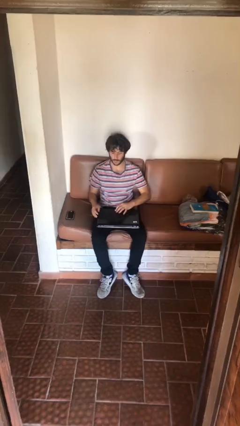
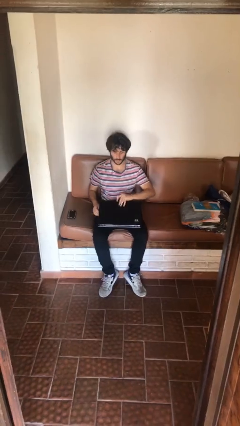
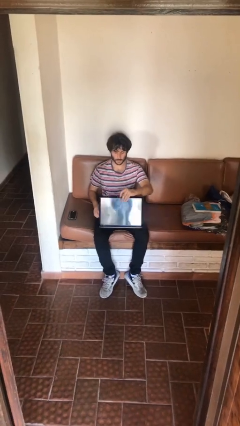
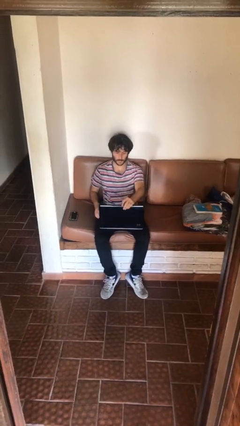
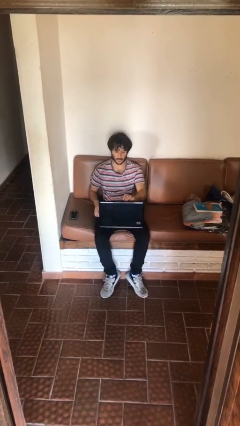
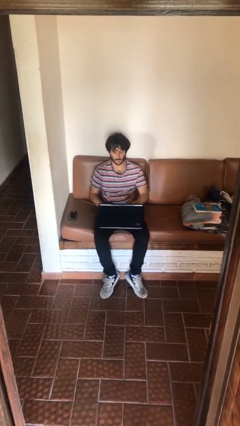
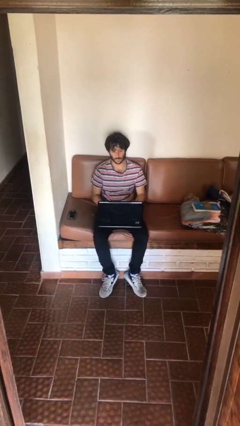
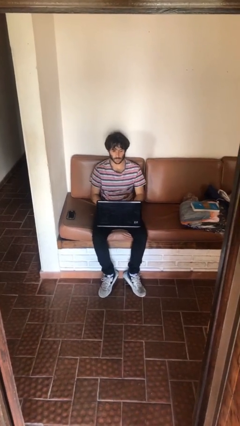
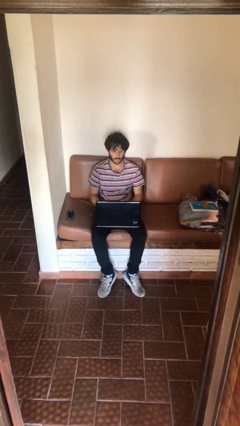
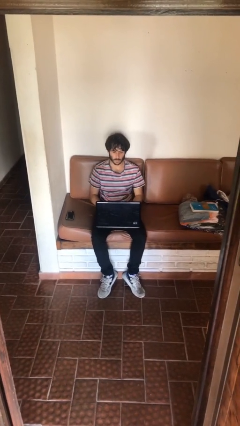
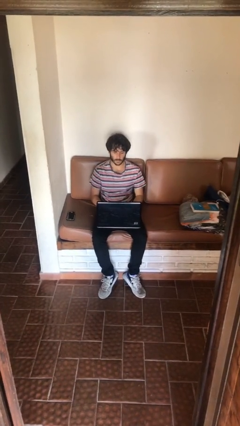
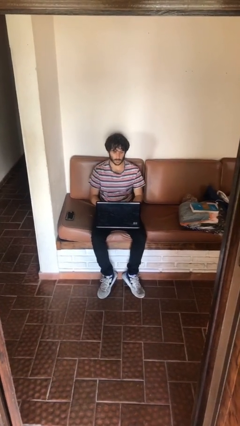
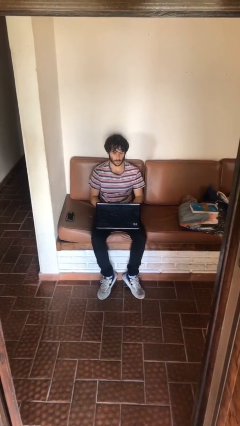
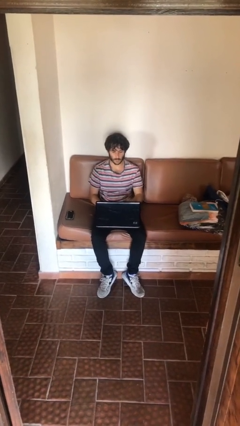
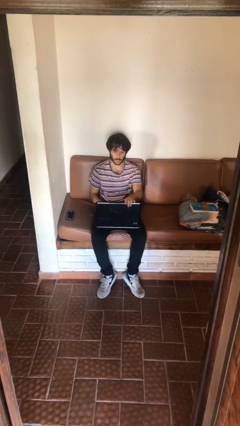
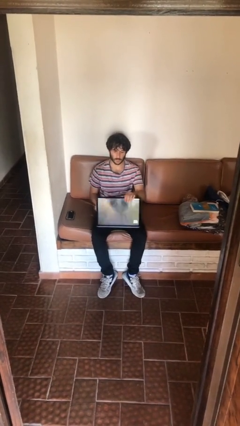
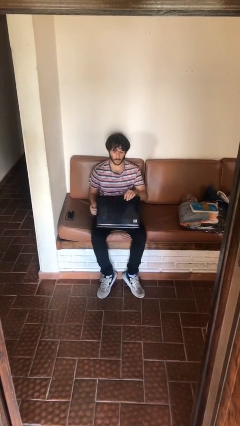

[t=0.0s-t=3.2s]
person interacts with laptop

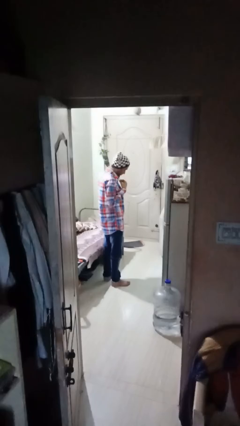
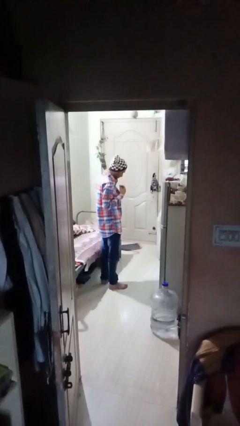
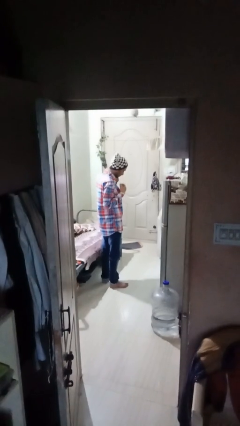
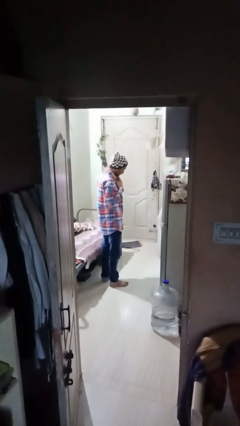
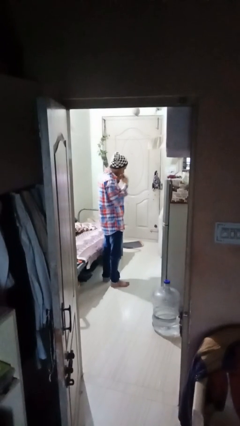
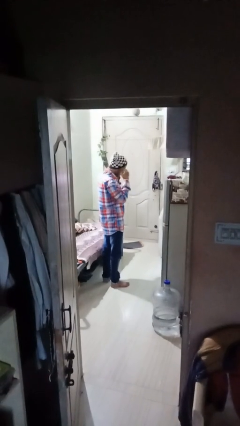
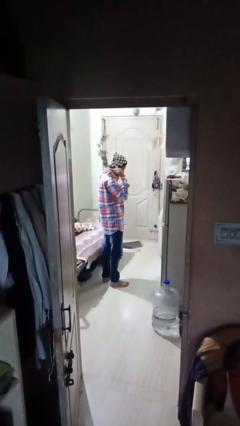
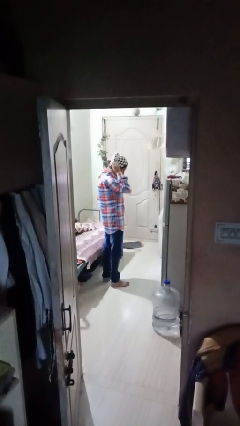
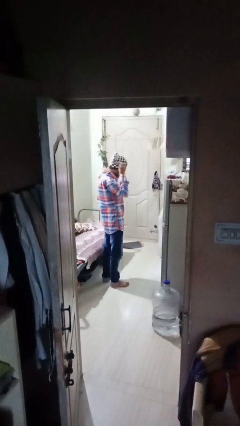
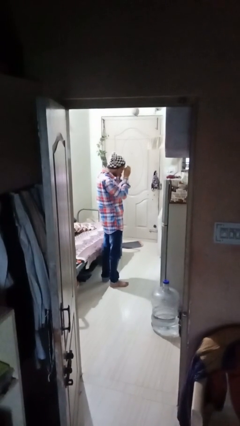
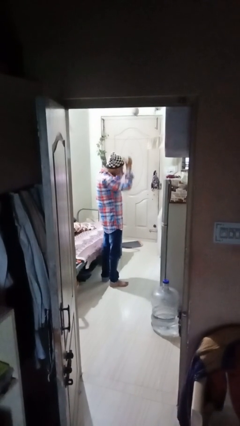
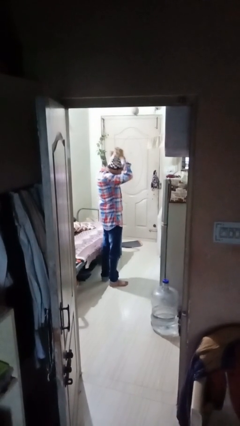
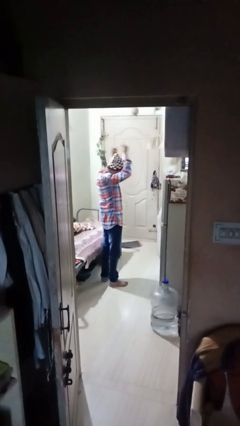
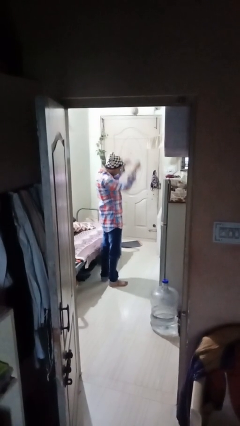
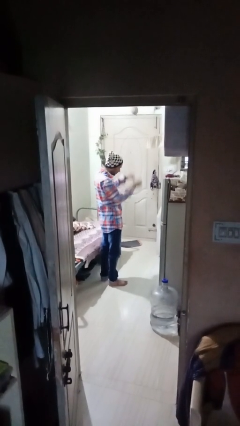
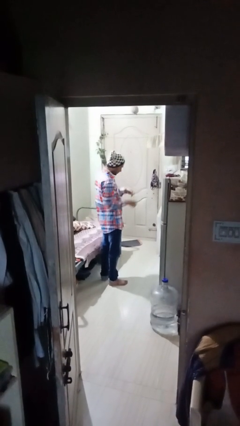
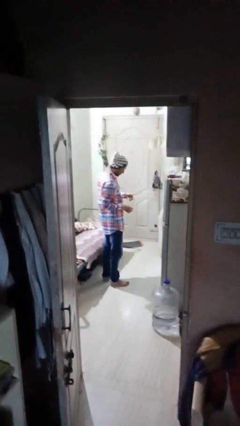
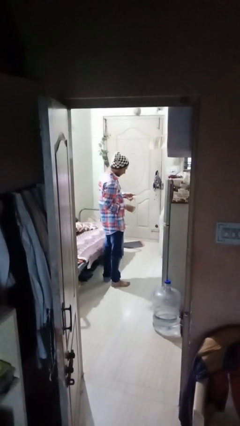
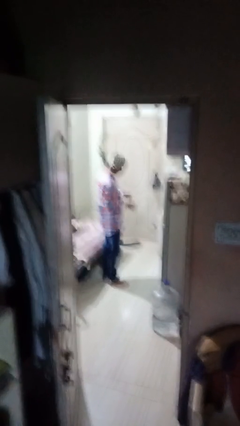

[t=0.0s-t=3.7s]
person takes off necklace

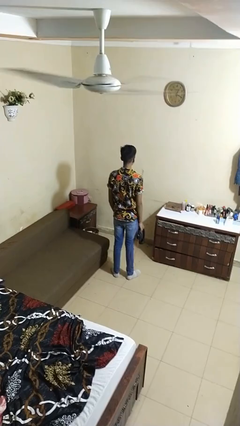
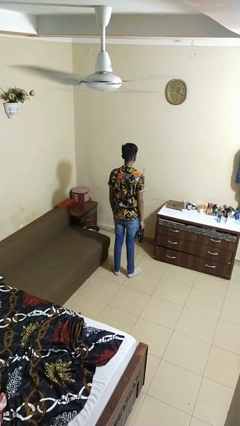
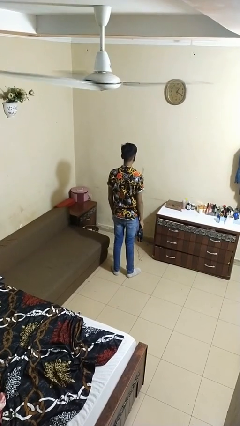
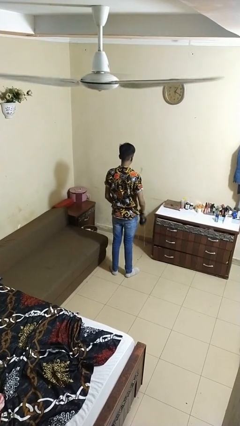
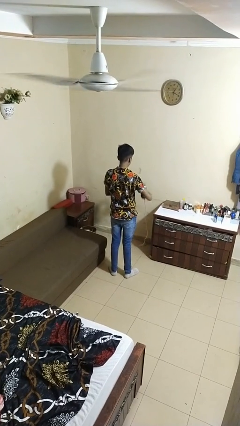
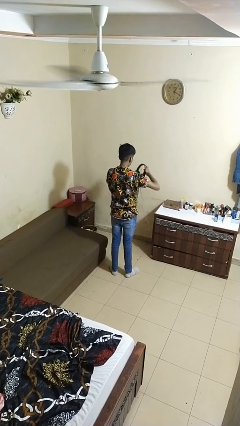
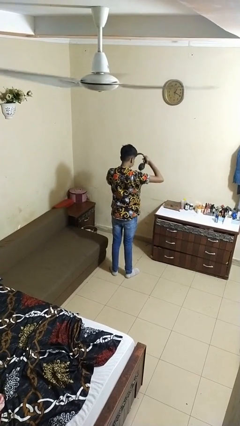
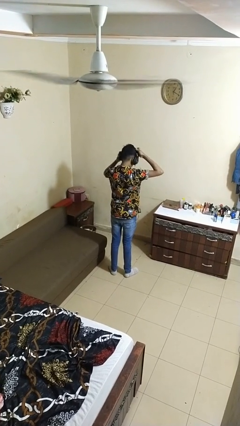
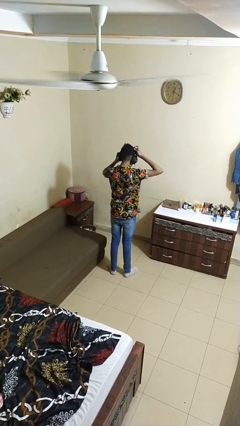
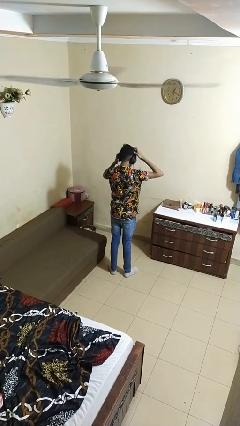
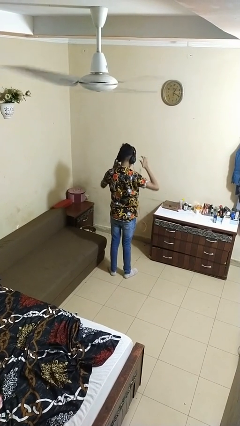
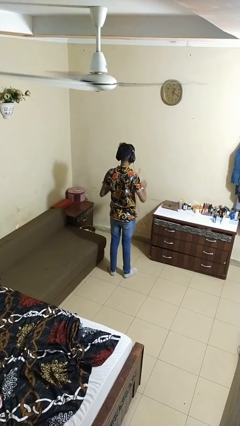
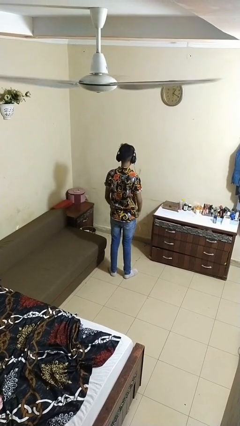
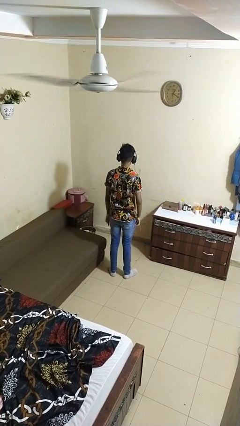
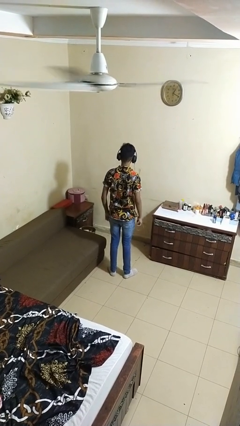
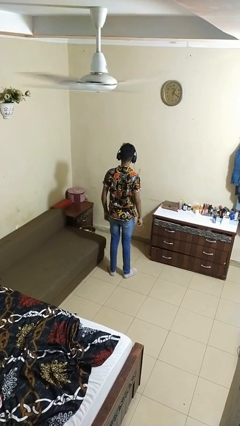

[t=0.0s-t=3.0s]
person puts on headphones

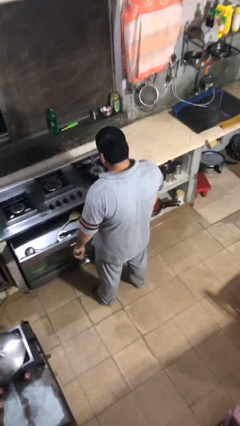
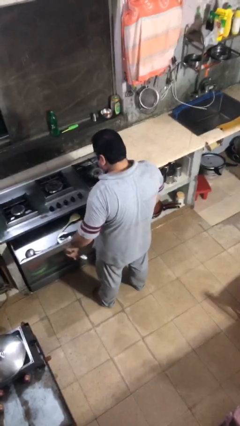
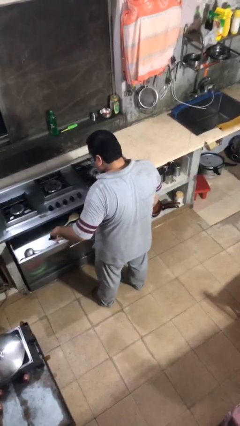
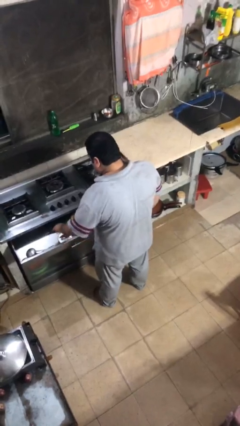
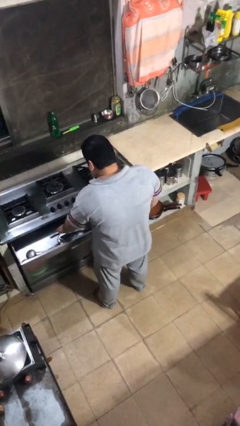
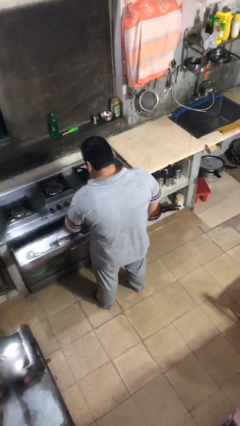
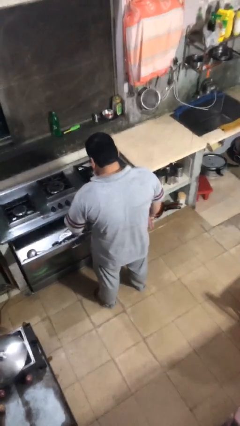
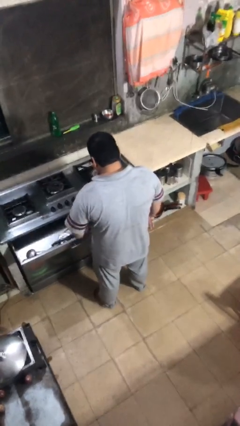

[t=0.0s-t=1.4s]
person puts object into kitchen drawer

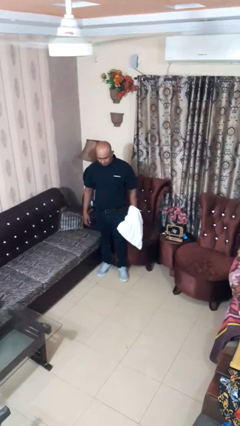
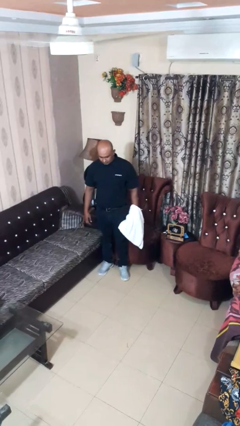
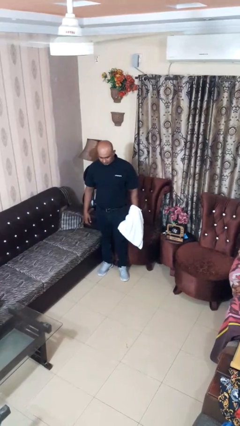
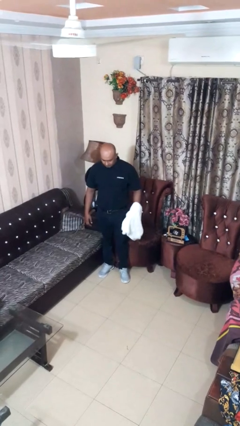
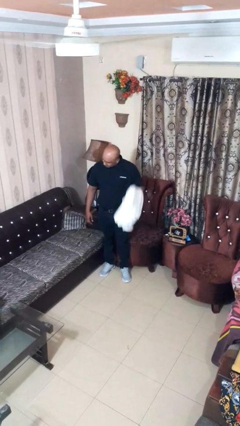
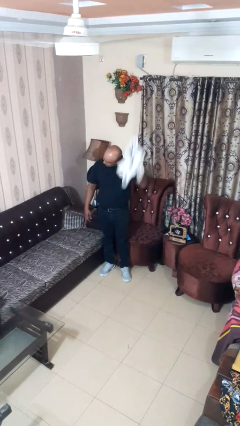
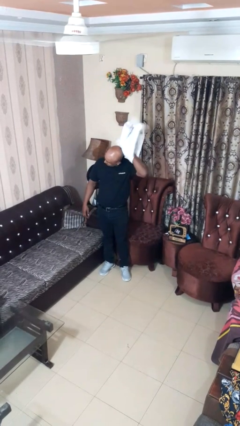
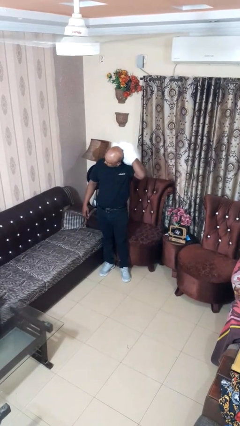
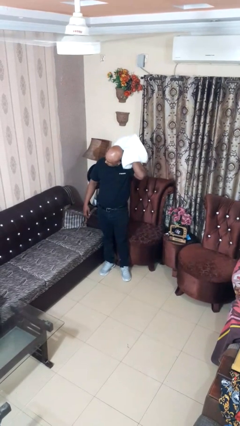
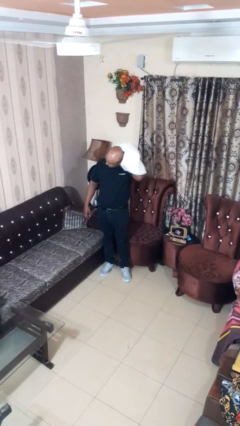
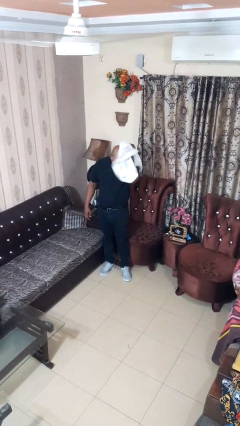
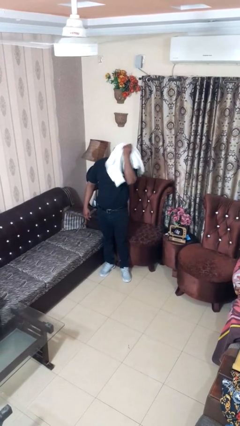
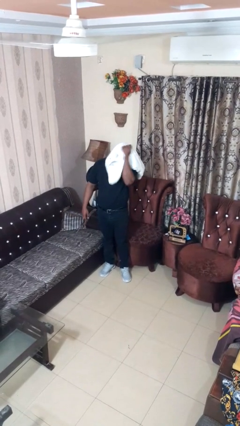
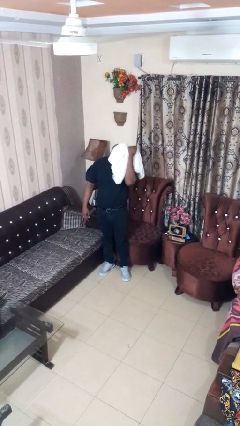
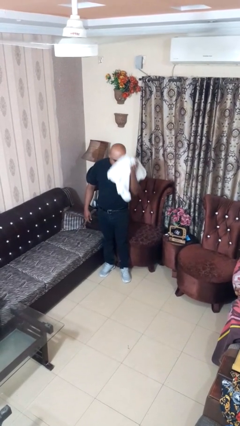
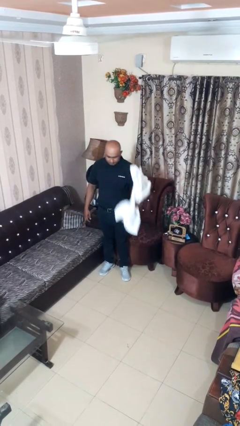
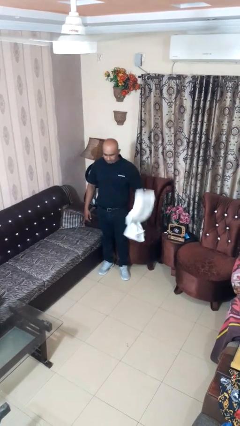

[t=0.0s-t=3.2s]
person dries hair with towel

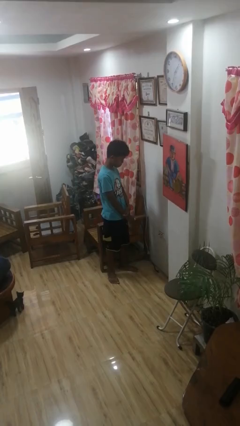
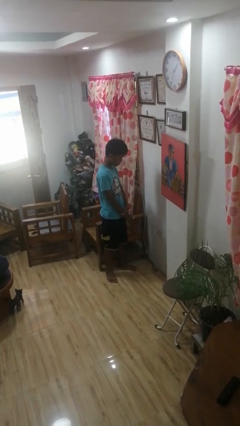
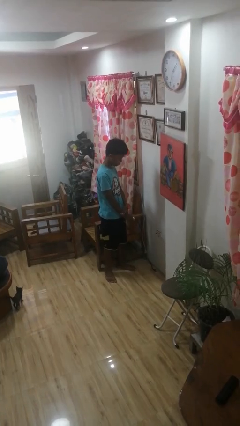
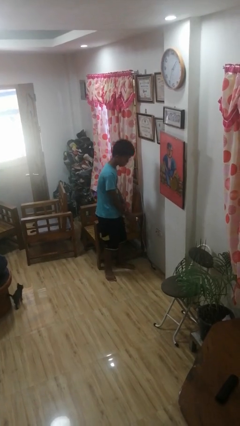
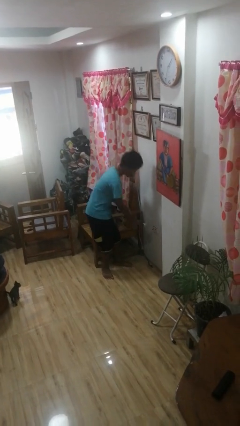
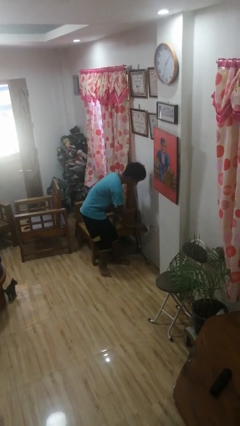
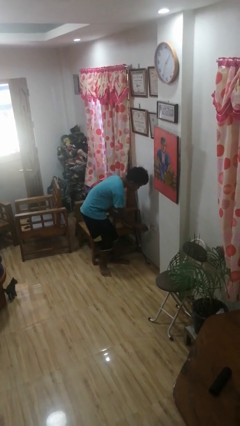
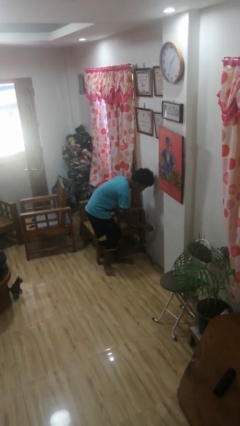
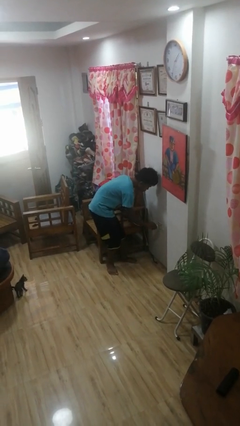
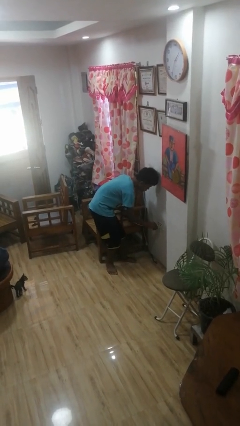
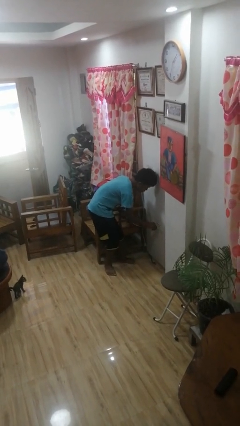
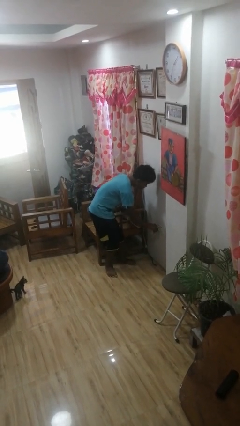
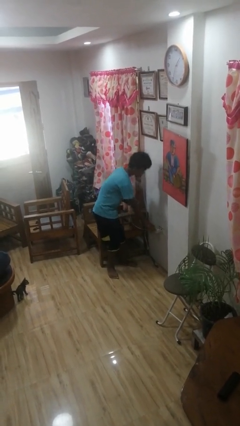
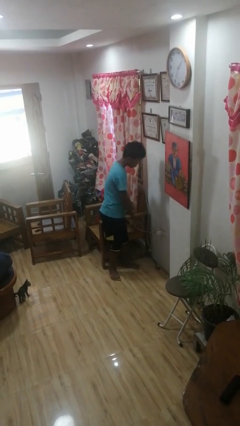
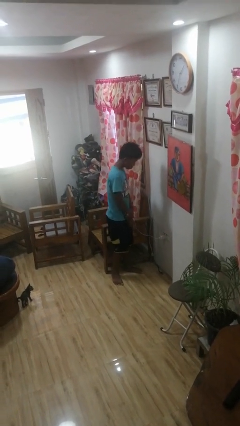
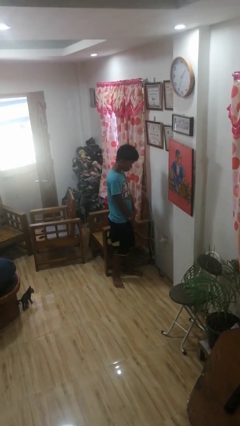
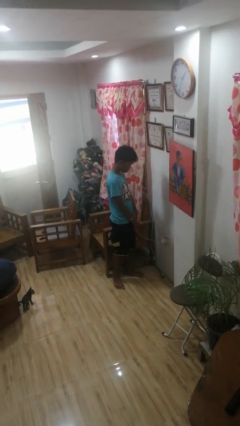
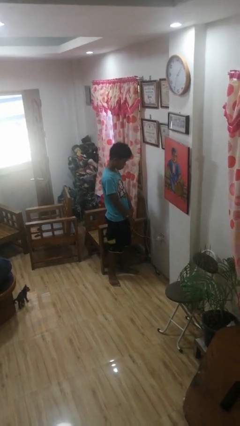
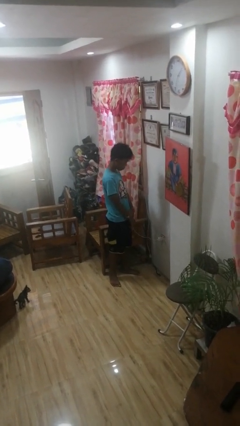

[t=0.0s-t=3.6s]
person plugs into electrical socket
